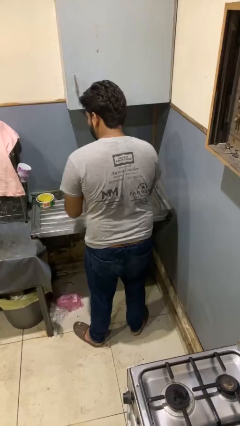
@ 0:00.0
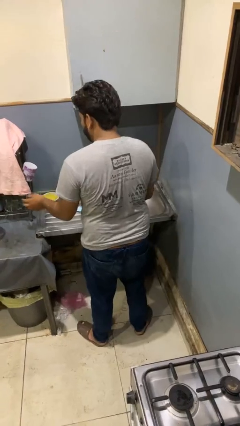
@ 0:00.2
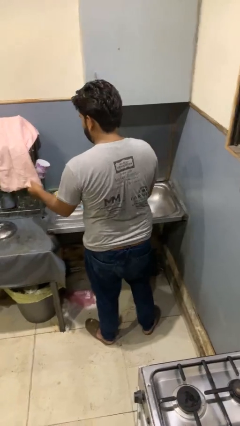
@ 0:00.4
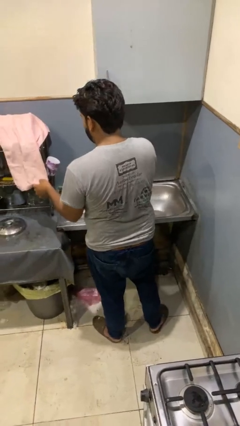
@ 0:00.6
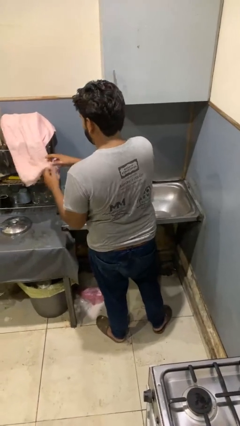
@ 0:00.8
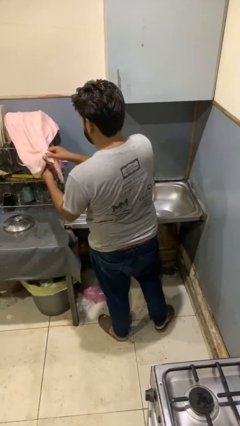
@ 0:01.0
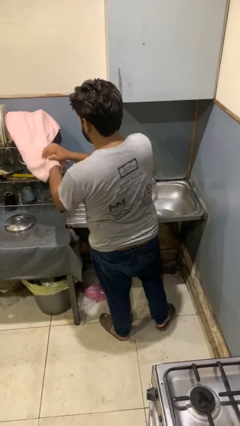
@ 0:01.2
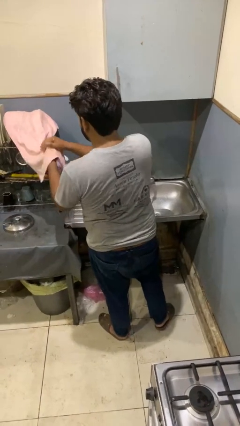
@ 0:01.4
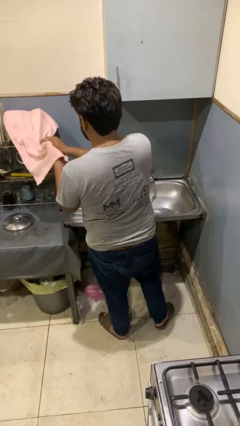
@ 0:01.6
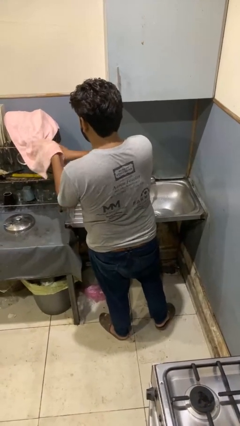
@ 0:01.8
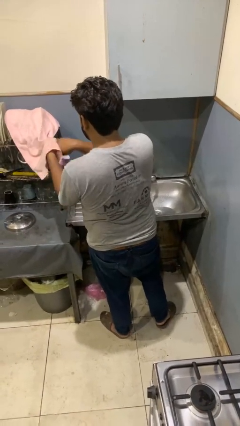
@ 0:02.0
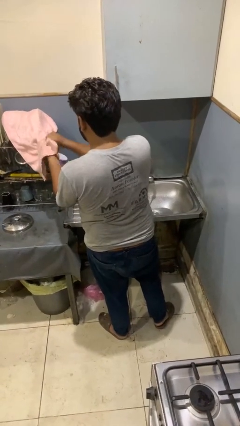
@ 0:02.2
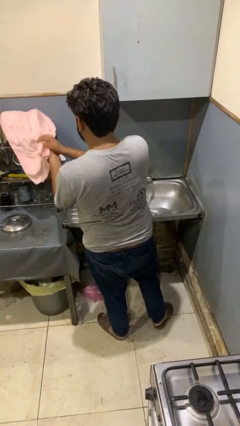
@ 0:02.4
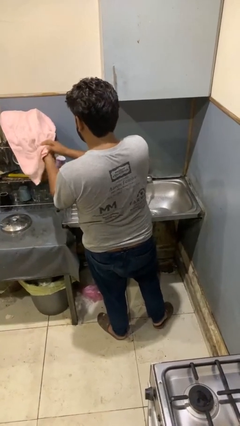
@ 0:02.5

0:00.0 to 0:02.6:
person dries hands with towel

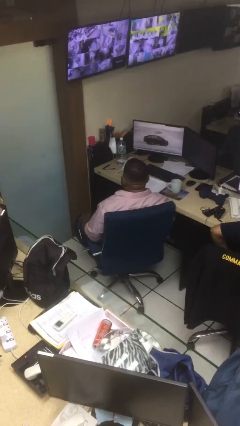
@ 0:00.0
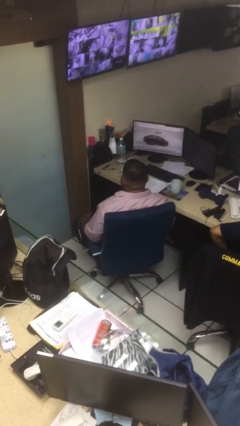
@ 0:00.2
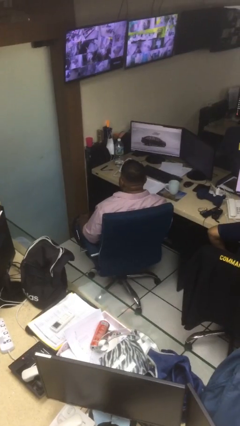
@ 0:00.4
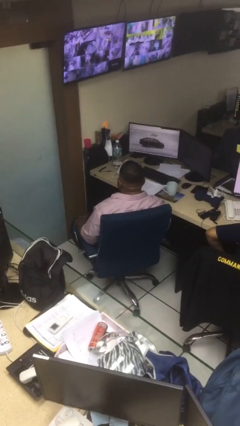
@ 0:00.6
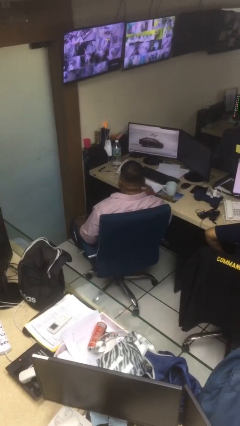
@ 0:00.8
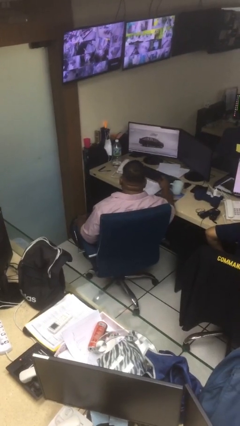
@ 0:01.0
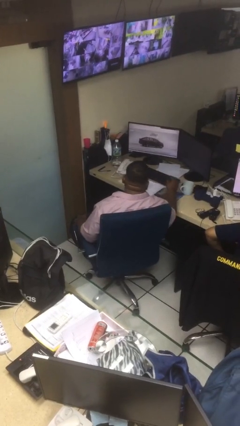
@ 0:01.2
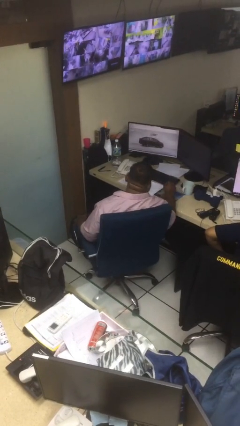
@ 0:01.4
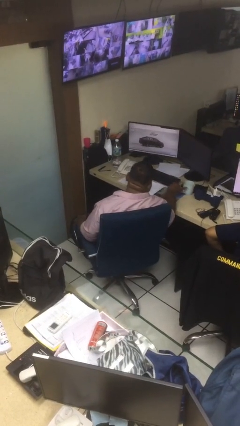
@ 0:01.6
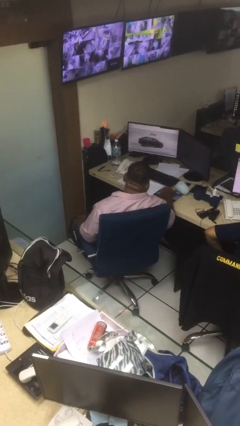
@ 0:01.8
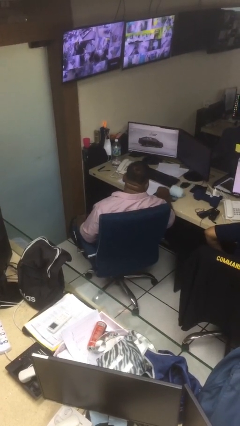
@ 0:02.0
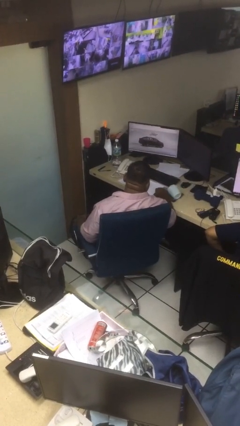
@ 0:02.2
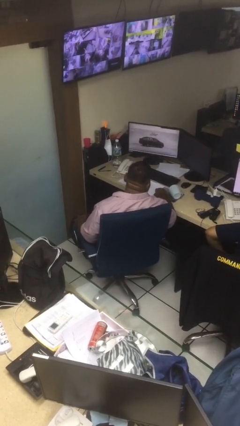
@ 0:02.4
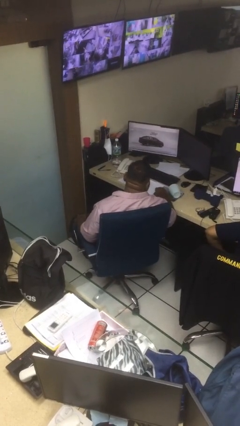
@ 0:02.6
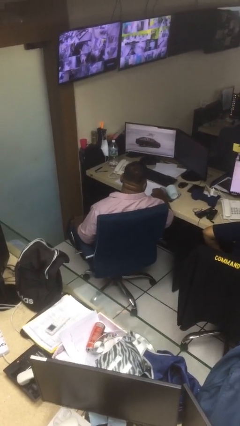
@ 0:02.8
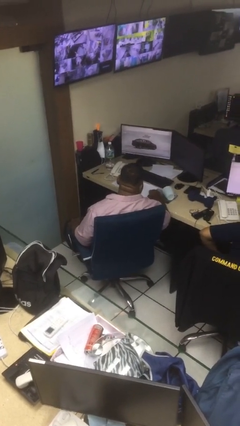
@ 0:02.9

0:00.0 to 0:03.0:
person knocks over glass

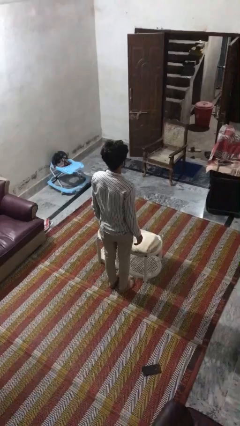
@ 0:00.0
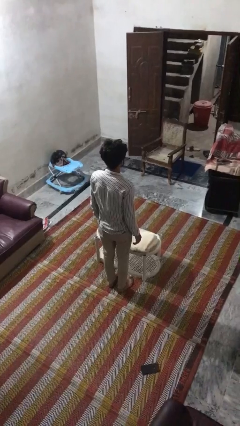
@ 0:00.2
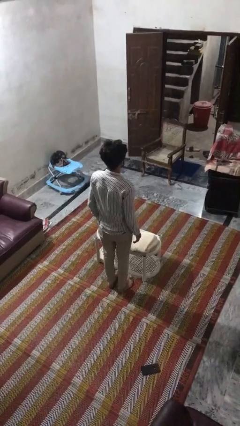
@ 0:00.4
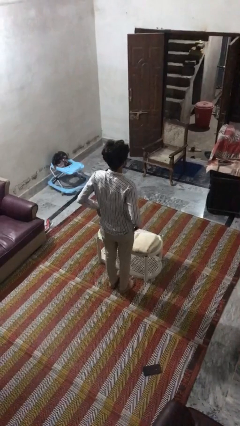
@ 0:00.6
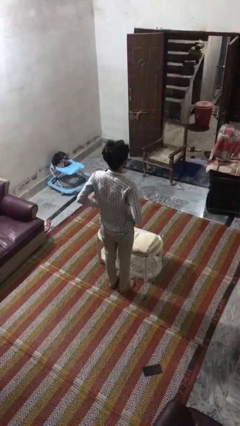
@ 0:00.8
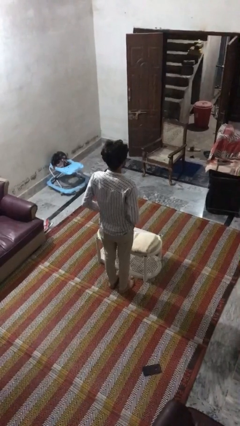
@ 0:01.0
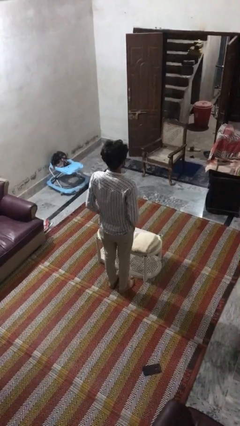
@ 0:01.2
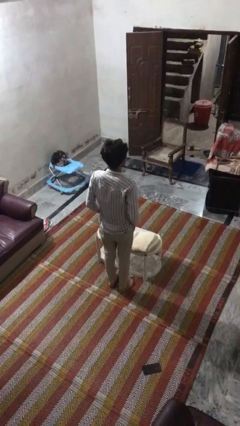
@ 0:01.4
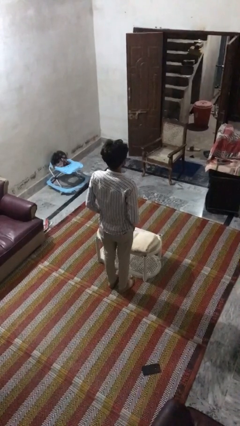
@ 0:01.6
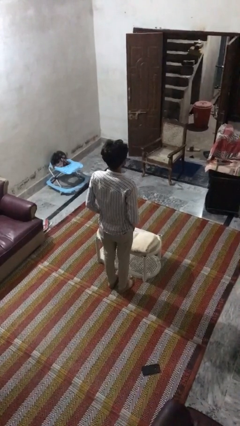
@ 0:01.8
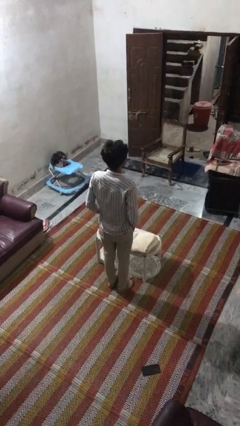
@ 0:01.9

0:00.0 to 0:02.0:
person puts hands in back pockets

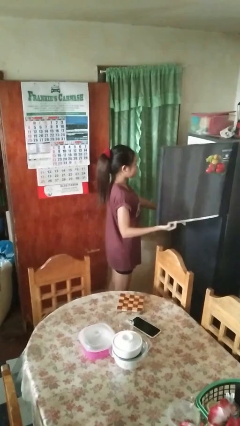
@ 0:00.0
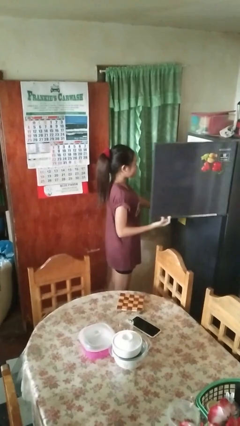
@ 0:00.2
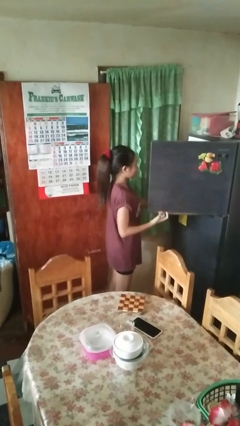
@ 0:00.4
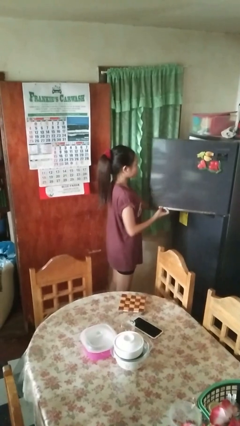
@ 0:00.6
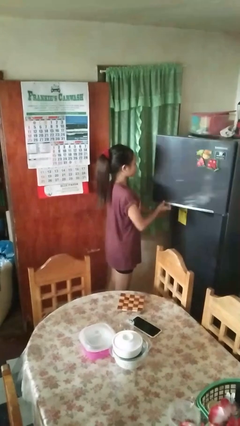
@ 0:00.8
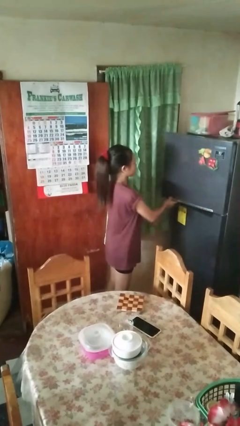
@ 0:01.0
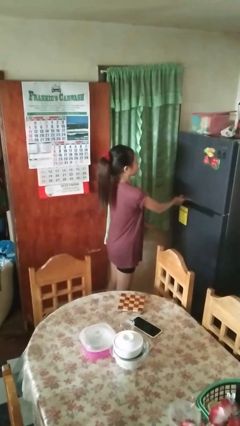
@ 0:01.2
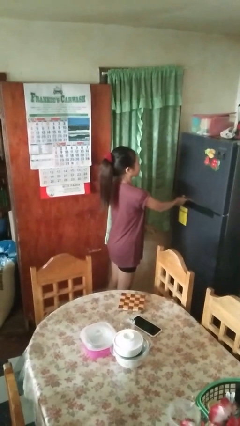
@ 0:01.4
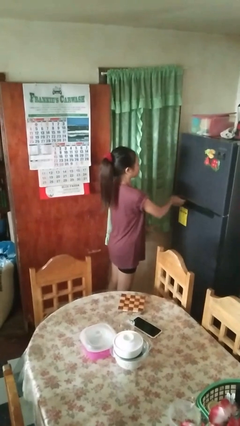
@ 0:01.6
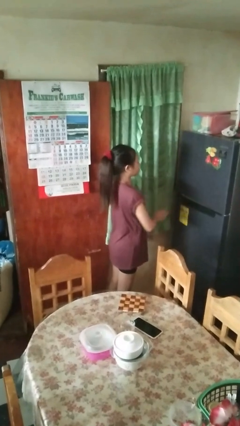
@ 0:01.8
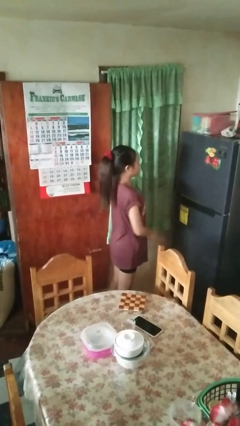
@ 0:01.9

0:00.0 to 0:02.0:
person closes refrigerator

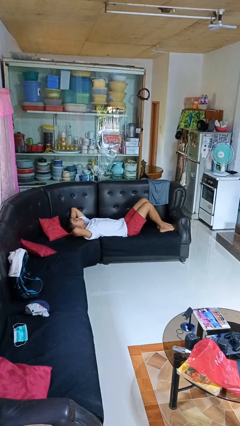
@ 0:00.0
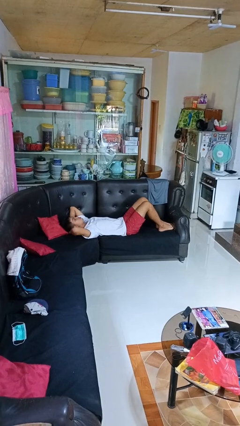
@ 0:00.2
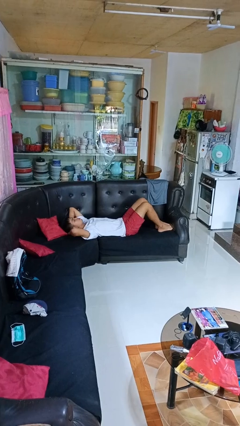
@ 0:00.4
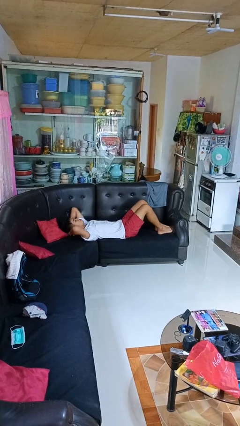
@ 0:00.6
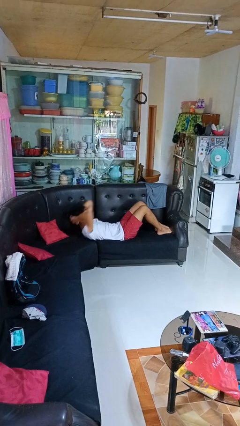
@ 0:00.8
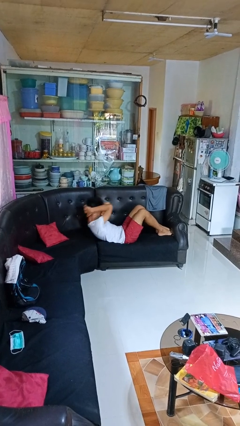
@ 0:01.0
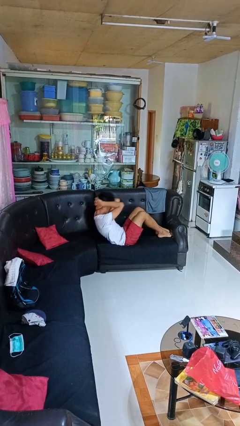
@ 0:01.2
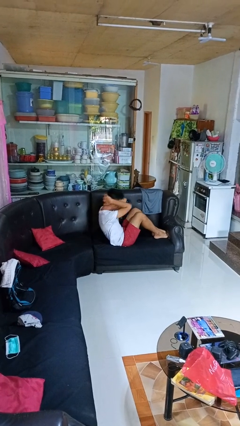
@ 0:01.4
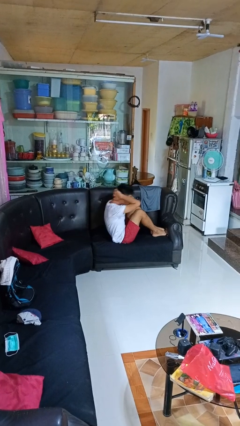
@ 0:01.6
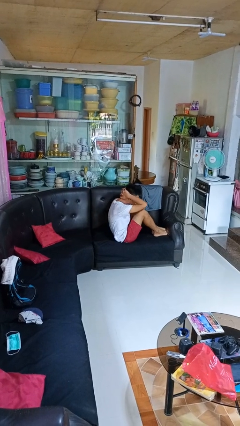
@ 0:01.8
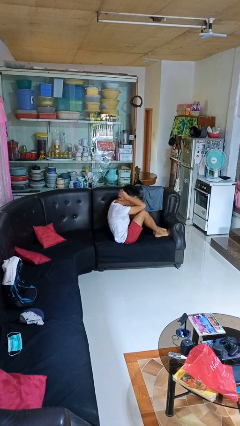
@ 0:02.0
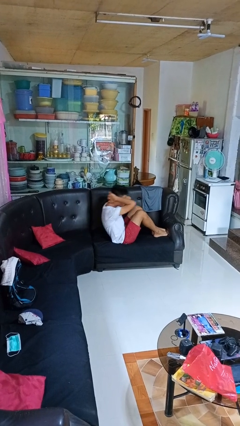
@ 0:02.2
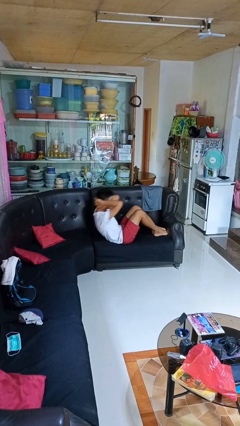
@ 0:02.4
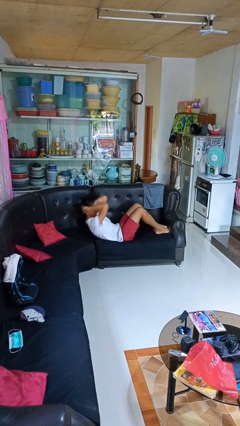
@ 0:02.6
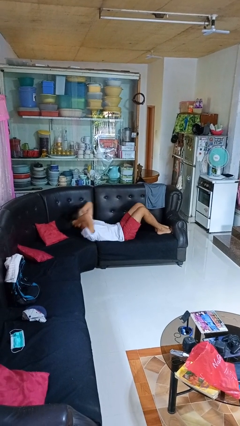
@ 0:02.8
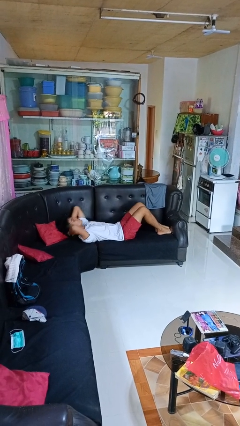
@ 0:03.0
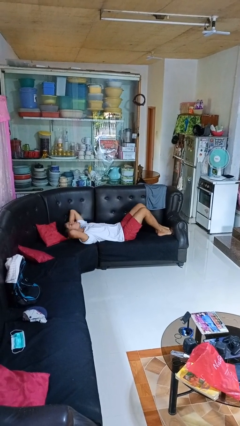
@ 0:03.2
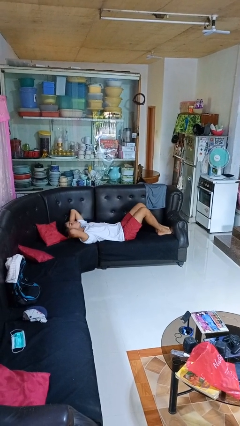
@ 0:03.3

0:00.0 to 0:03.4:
person exercises with situp

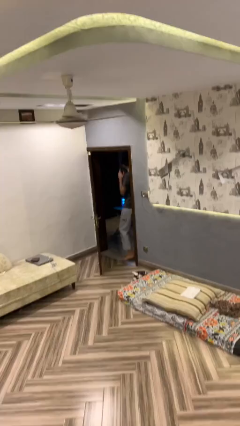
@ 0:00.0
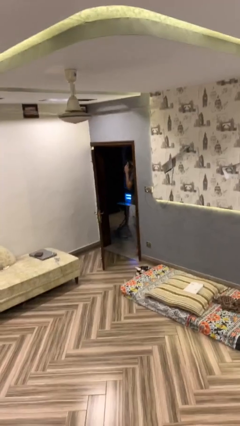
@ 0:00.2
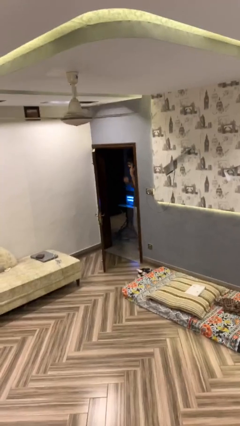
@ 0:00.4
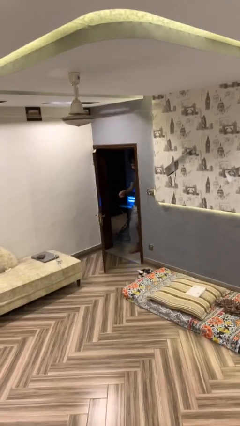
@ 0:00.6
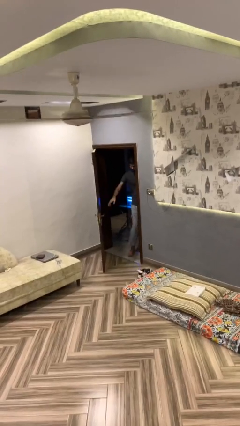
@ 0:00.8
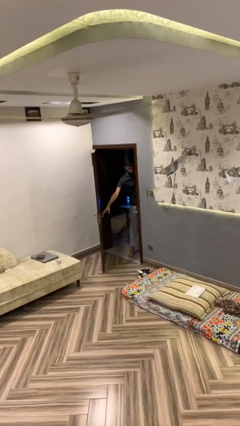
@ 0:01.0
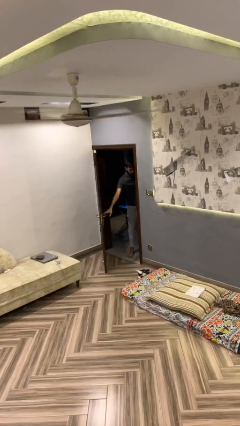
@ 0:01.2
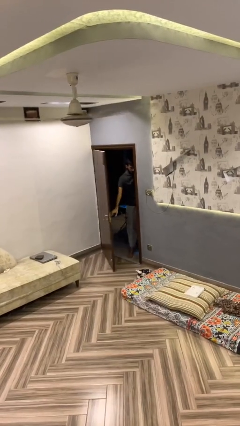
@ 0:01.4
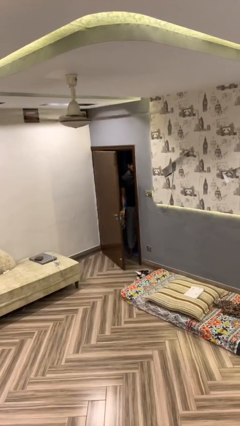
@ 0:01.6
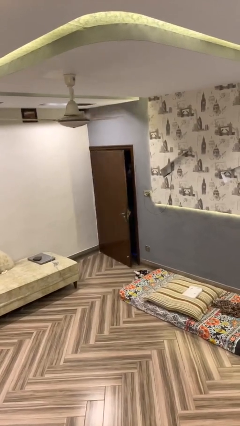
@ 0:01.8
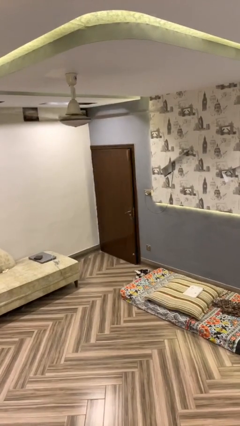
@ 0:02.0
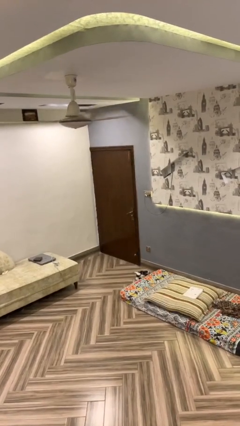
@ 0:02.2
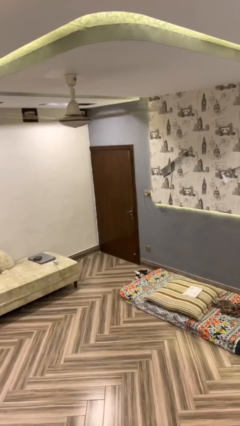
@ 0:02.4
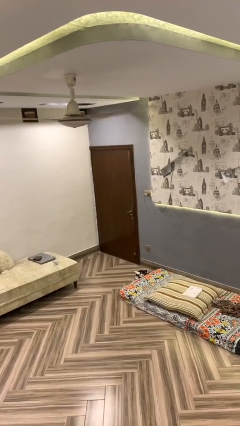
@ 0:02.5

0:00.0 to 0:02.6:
person closes facility door

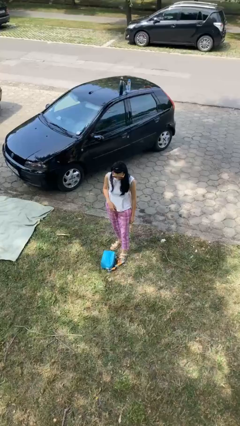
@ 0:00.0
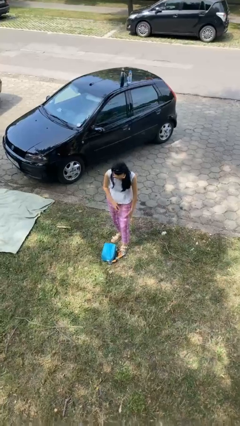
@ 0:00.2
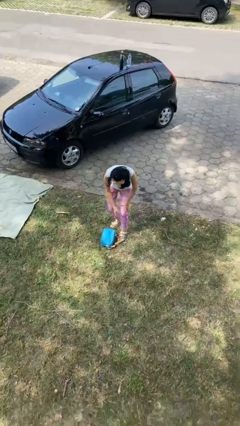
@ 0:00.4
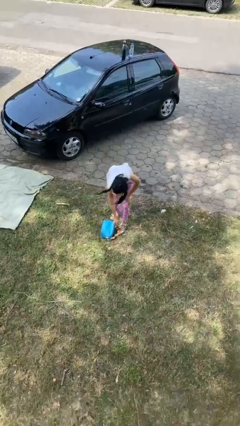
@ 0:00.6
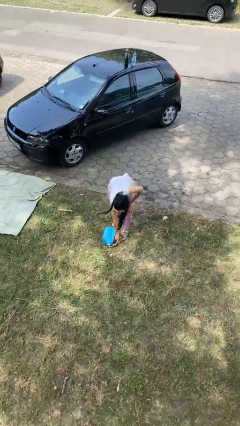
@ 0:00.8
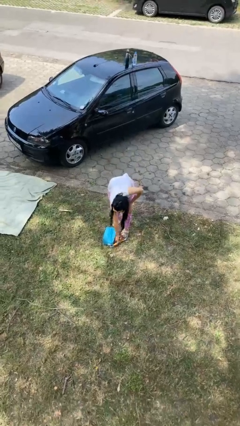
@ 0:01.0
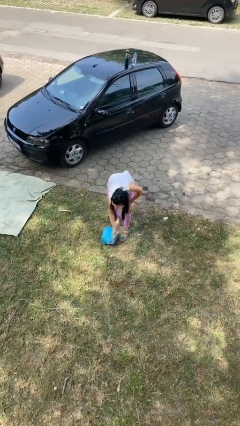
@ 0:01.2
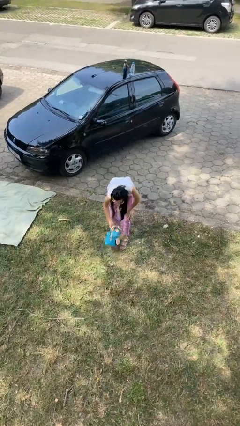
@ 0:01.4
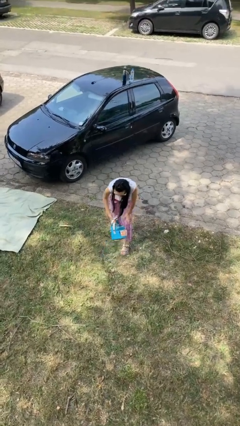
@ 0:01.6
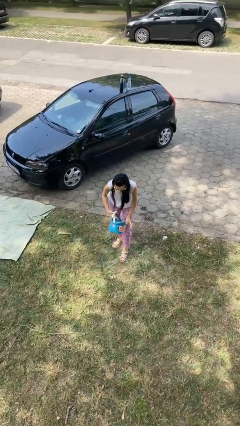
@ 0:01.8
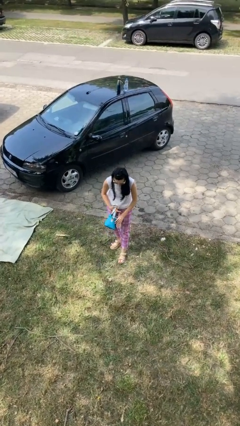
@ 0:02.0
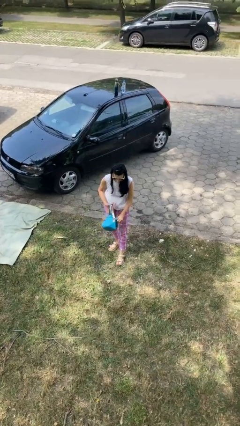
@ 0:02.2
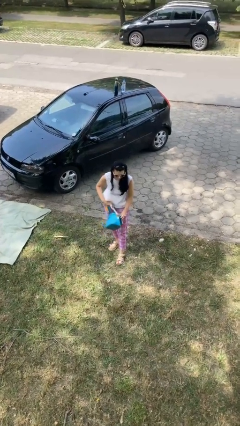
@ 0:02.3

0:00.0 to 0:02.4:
person picks up object from floor
